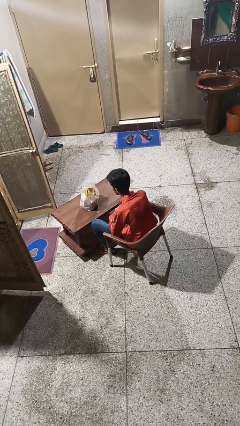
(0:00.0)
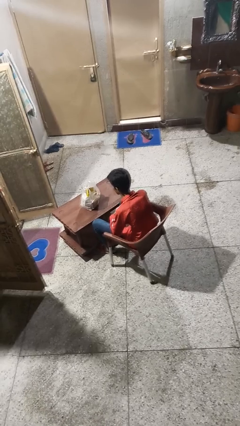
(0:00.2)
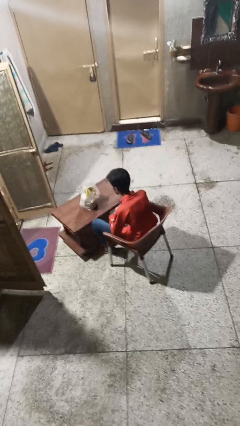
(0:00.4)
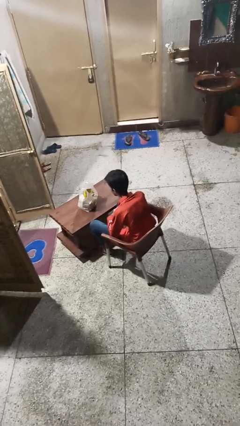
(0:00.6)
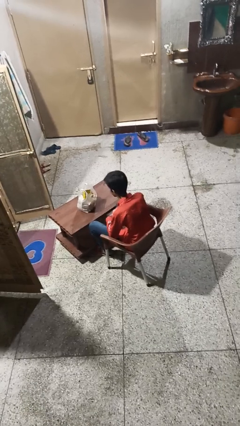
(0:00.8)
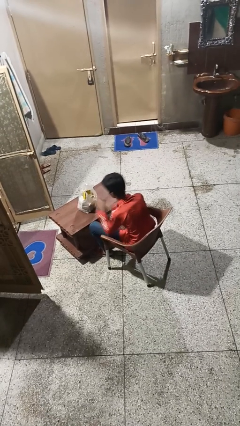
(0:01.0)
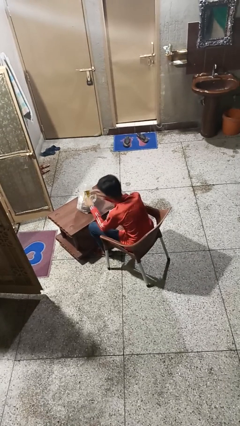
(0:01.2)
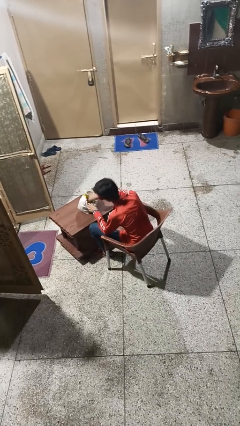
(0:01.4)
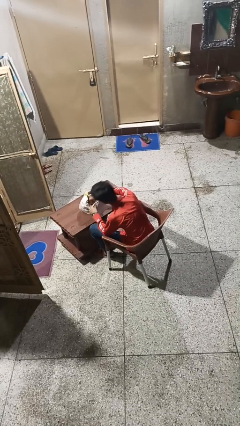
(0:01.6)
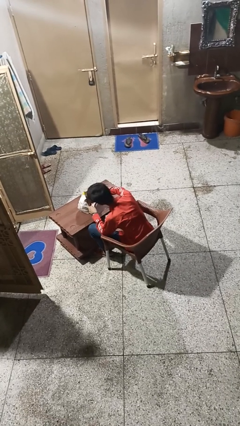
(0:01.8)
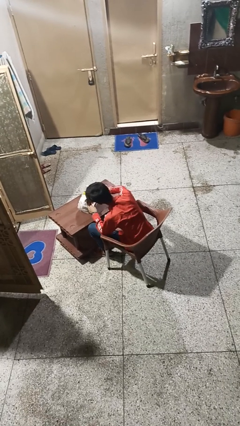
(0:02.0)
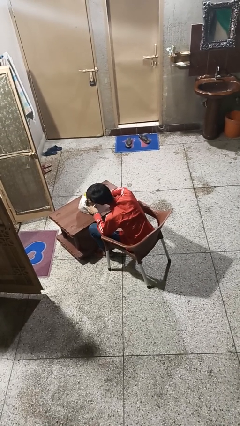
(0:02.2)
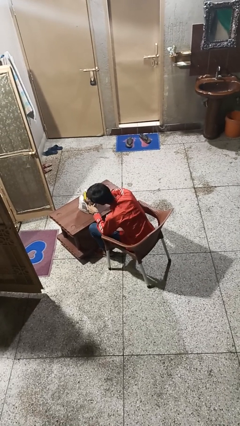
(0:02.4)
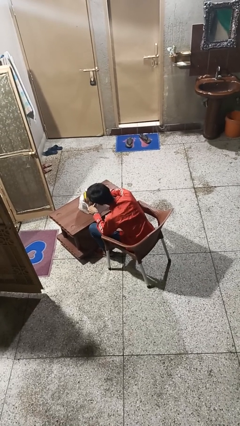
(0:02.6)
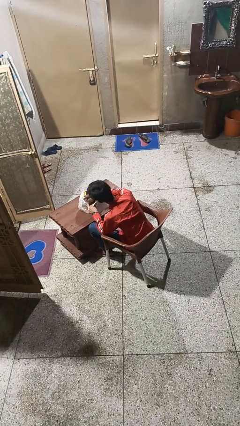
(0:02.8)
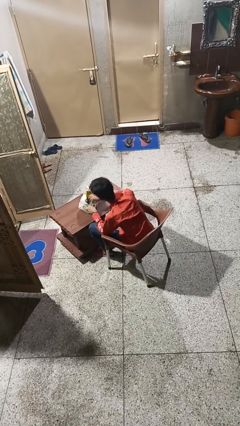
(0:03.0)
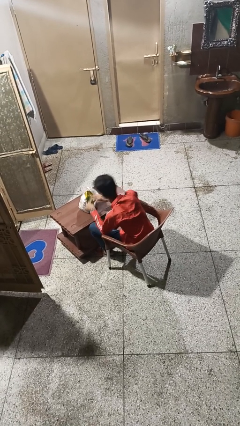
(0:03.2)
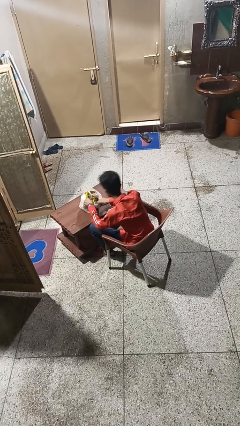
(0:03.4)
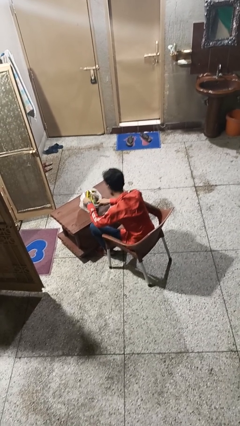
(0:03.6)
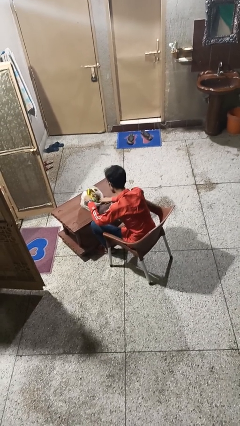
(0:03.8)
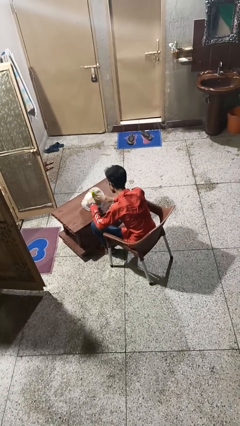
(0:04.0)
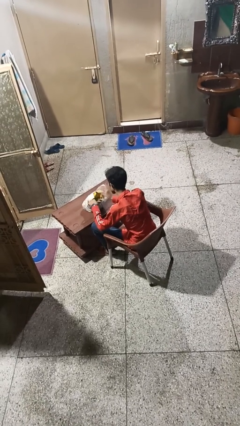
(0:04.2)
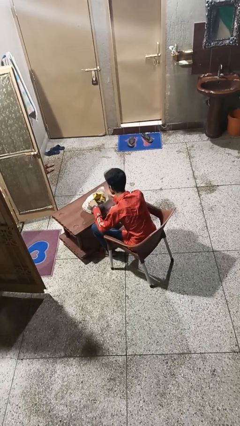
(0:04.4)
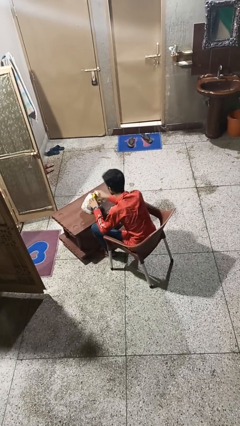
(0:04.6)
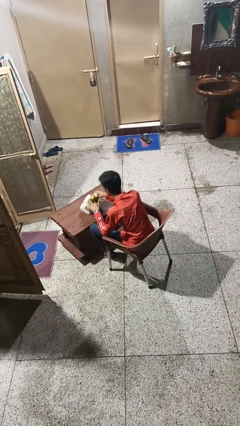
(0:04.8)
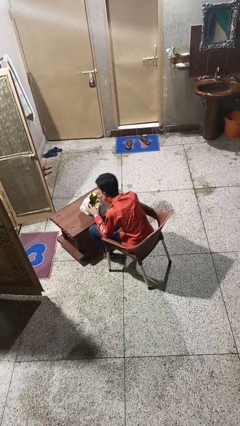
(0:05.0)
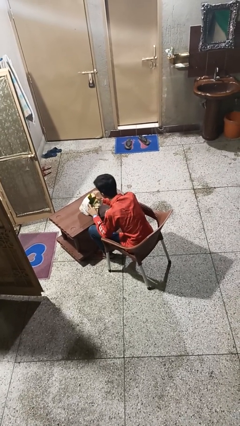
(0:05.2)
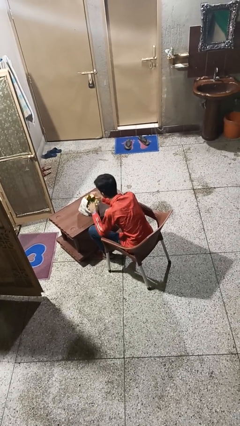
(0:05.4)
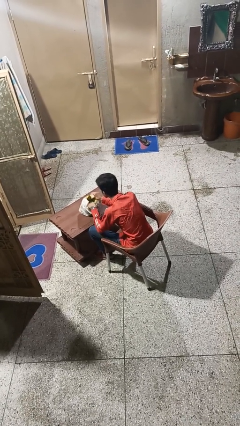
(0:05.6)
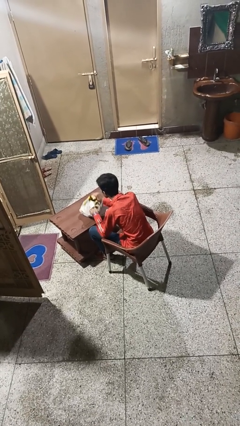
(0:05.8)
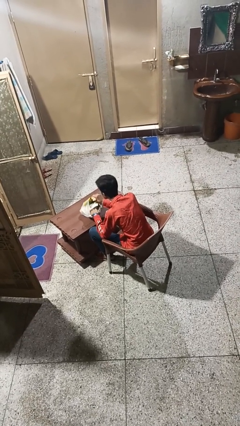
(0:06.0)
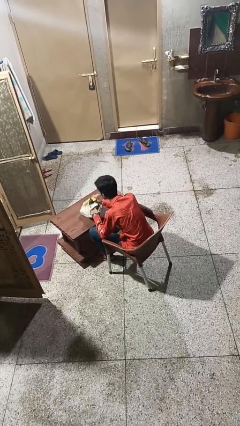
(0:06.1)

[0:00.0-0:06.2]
person searches in bag

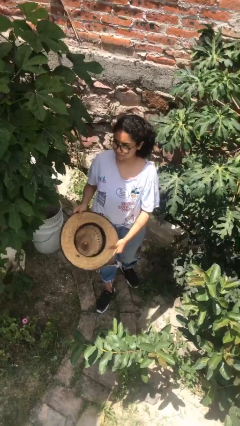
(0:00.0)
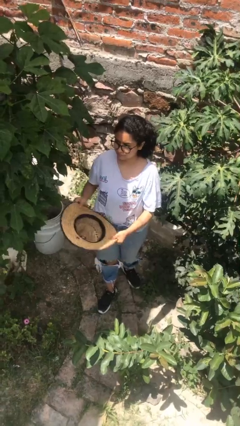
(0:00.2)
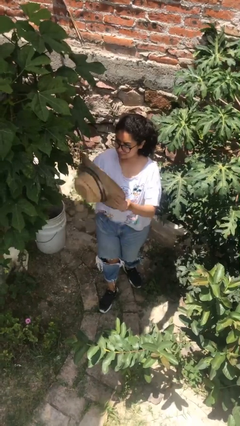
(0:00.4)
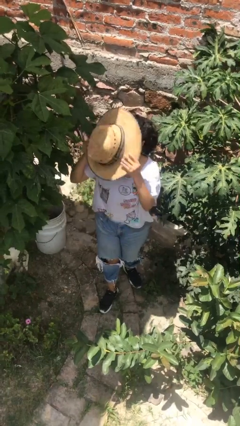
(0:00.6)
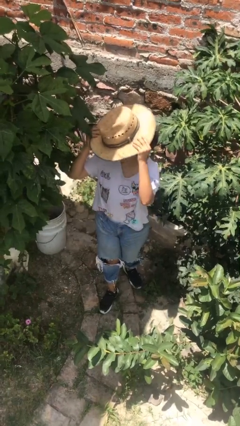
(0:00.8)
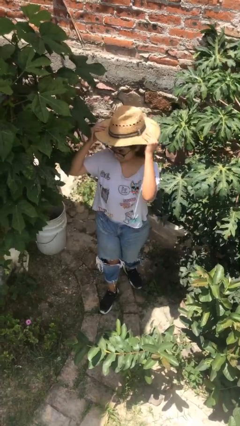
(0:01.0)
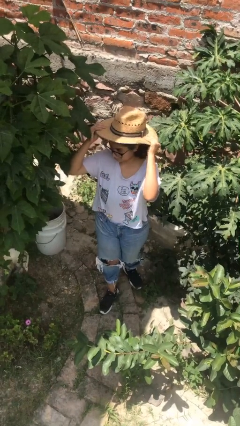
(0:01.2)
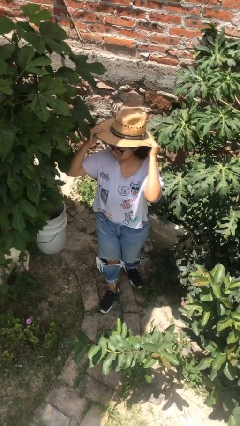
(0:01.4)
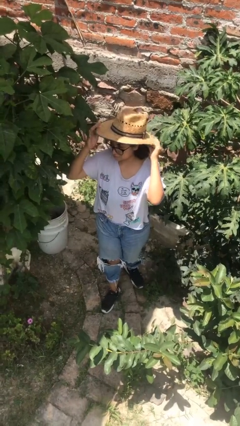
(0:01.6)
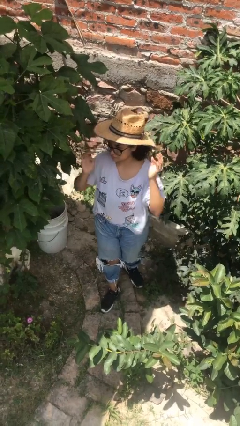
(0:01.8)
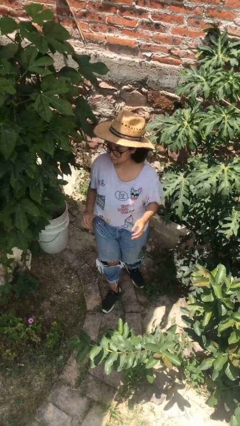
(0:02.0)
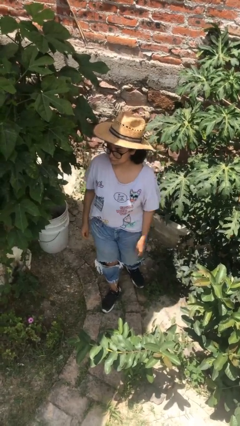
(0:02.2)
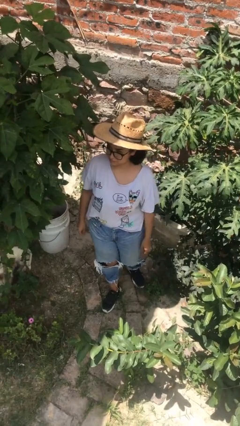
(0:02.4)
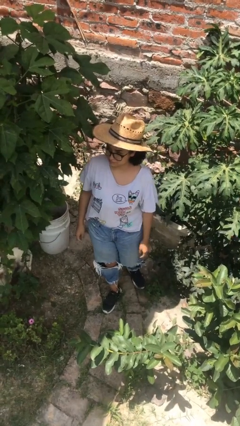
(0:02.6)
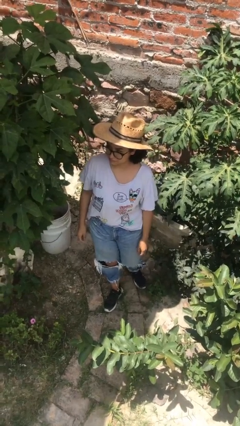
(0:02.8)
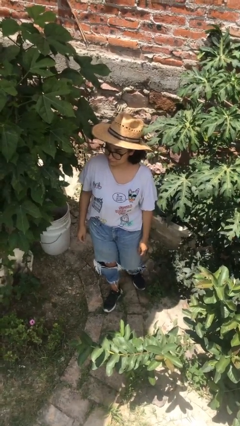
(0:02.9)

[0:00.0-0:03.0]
person puts on hat

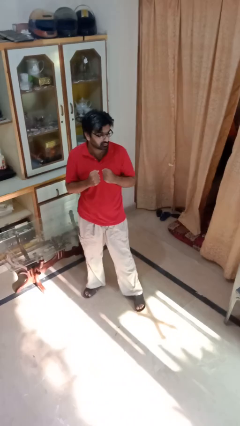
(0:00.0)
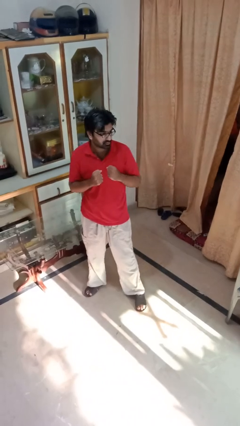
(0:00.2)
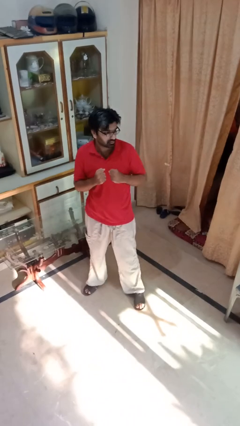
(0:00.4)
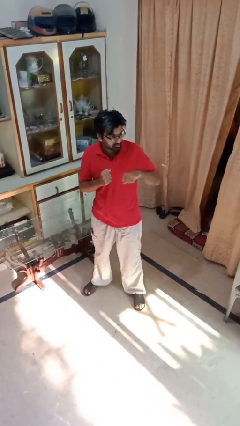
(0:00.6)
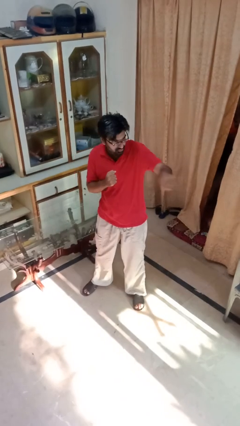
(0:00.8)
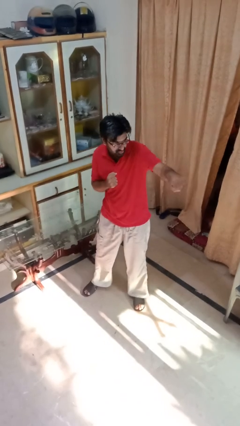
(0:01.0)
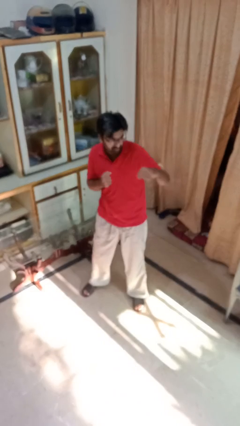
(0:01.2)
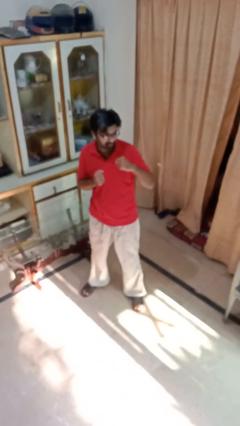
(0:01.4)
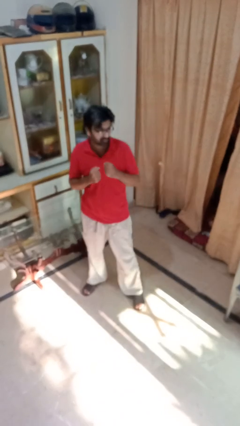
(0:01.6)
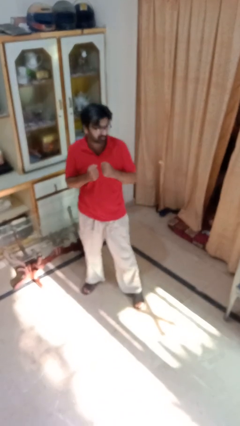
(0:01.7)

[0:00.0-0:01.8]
person punches

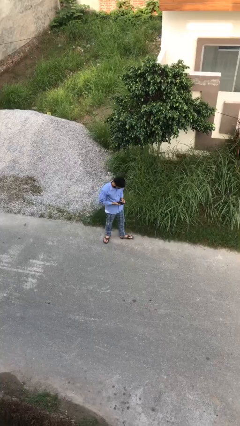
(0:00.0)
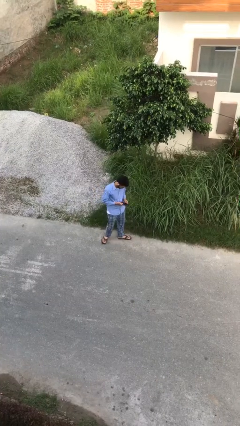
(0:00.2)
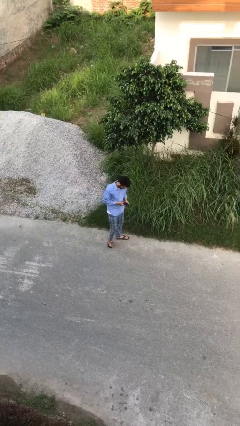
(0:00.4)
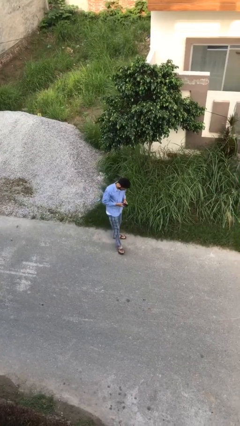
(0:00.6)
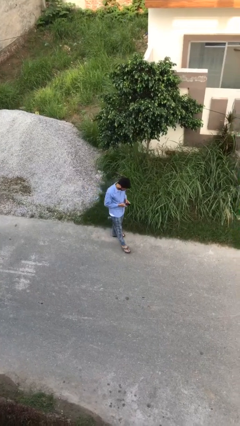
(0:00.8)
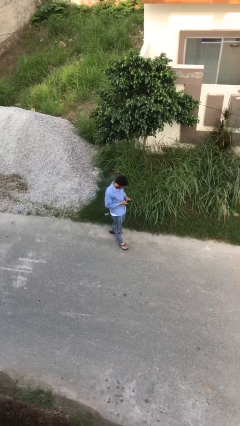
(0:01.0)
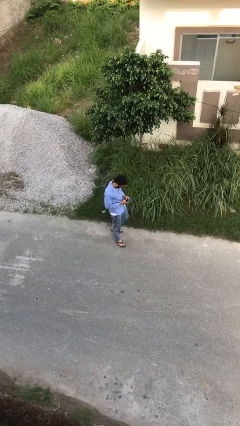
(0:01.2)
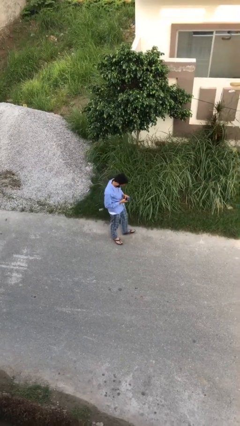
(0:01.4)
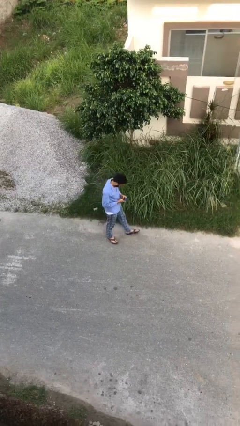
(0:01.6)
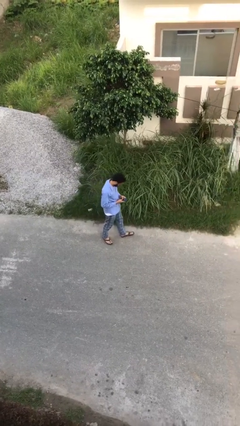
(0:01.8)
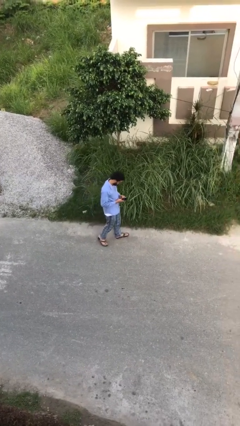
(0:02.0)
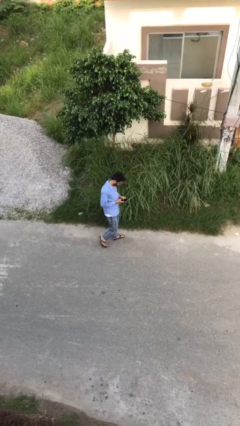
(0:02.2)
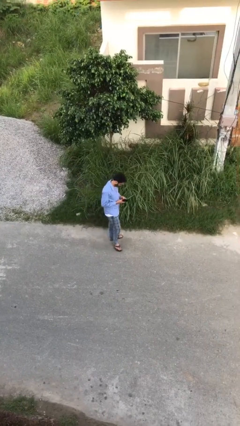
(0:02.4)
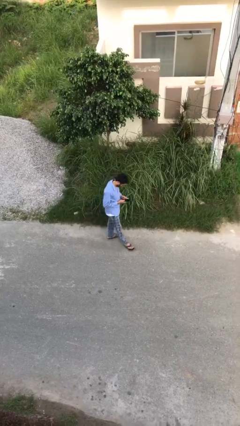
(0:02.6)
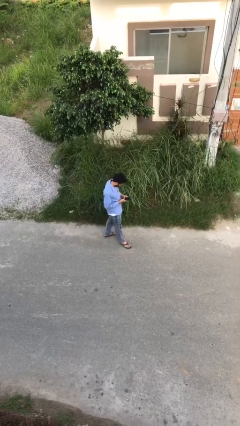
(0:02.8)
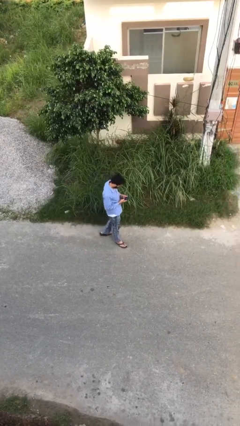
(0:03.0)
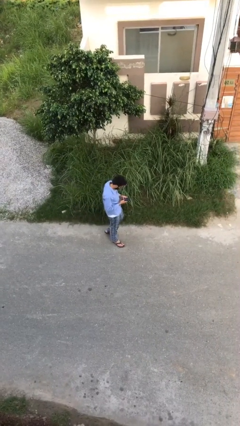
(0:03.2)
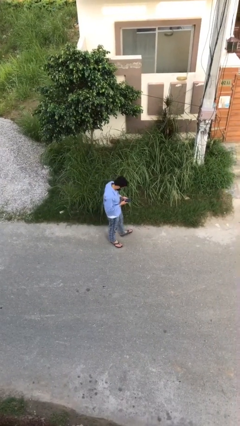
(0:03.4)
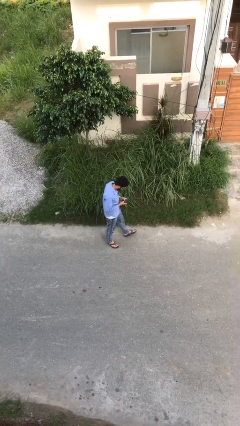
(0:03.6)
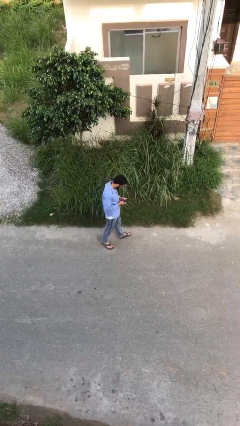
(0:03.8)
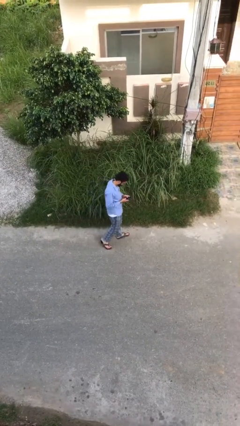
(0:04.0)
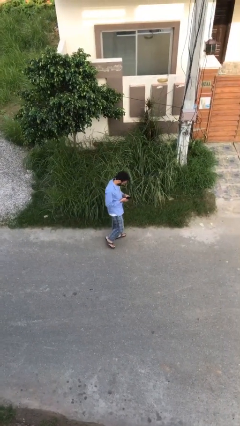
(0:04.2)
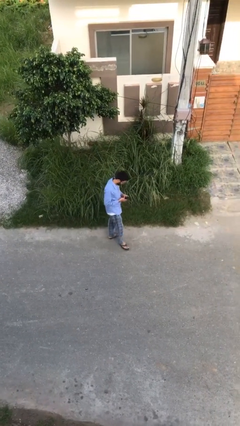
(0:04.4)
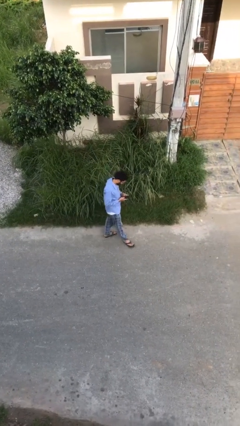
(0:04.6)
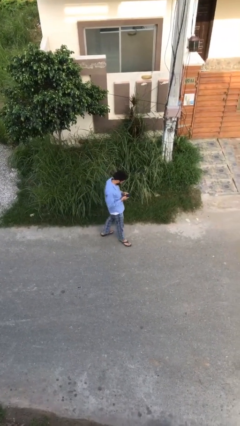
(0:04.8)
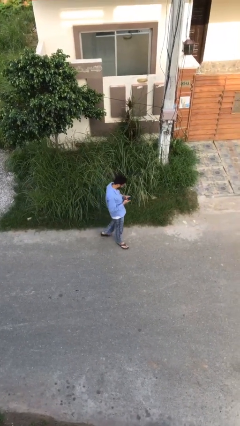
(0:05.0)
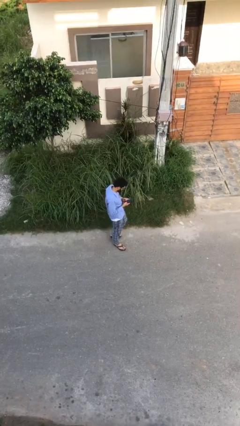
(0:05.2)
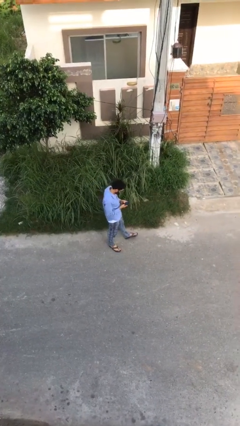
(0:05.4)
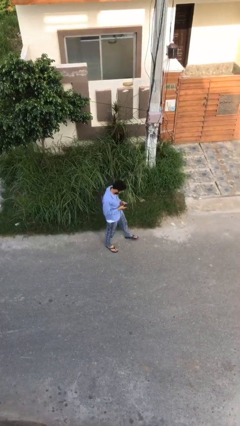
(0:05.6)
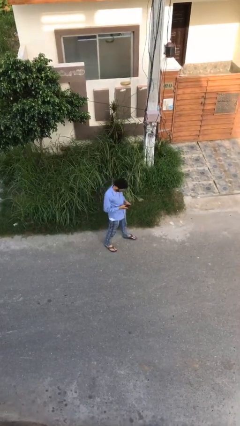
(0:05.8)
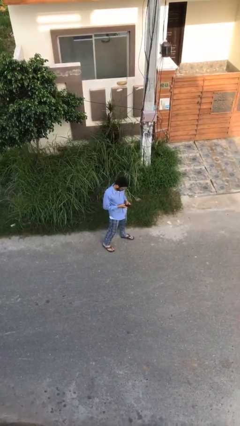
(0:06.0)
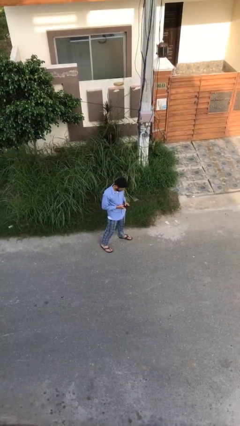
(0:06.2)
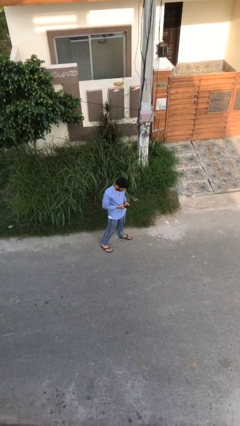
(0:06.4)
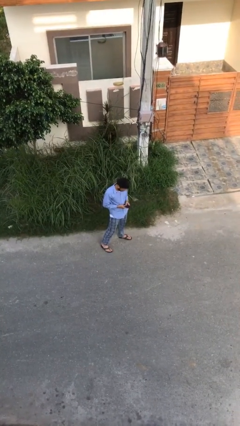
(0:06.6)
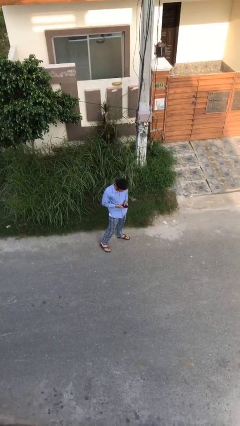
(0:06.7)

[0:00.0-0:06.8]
person texts on phone
